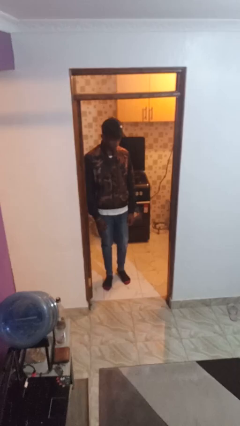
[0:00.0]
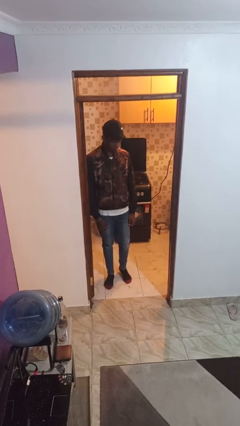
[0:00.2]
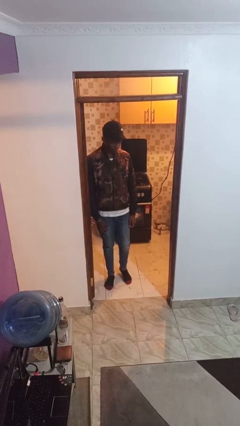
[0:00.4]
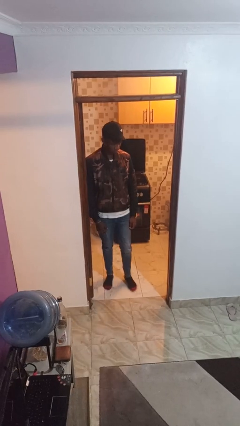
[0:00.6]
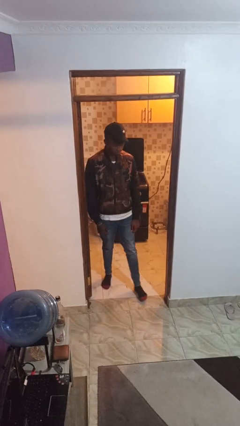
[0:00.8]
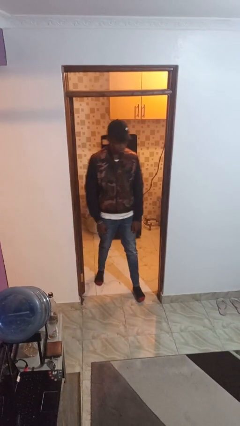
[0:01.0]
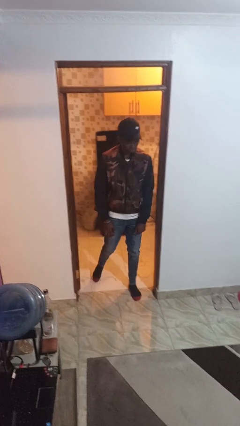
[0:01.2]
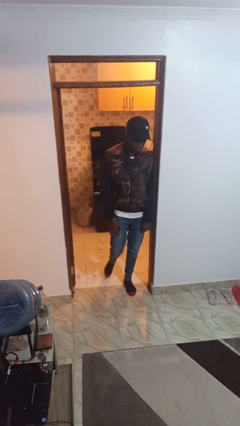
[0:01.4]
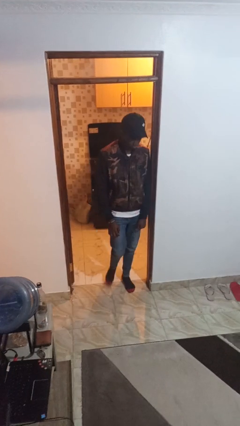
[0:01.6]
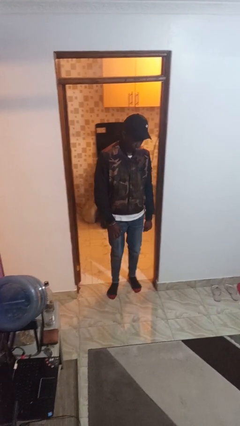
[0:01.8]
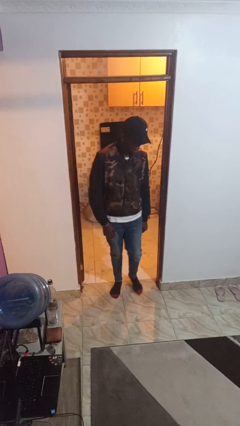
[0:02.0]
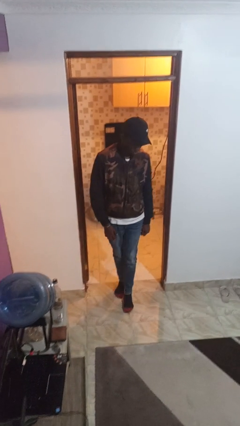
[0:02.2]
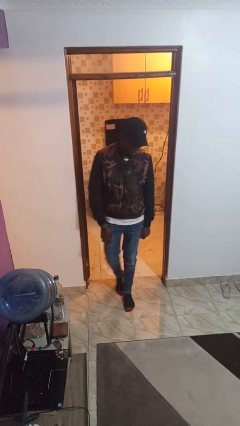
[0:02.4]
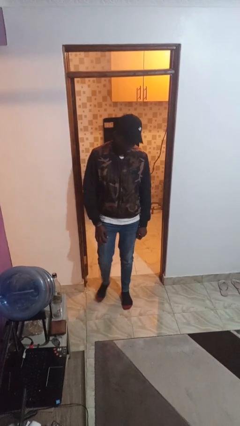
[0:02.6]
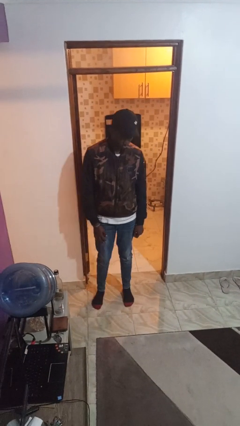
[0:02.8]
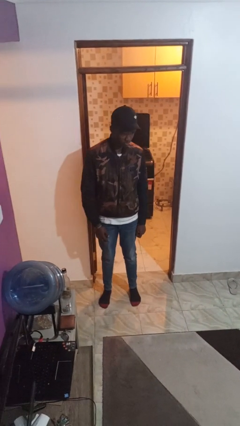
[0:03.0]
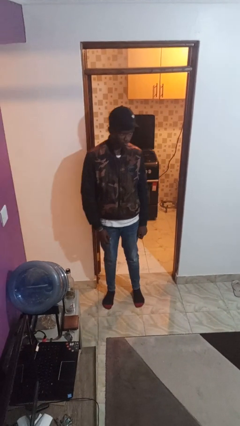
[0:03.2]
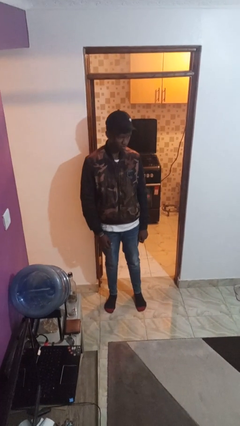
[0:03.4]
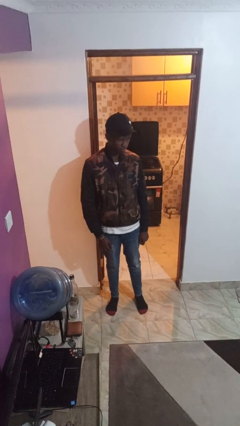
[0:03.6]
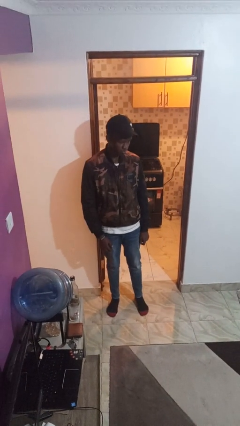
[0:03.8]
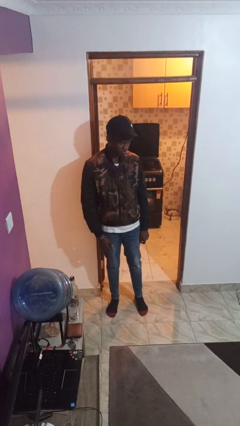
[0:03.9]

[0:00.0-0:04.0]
person bumps into wall

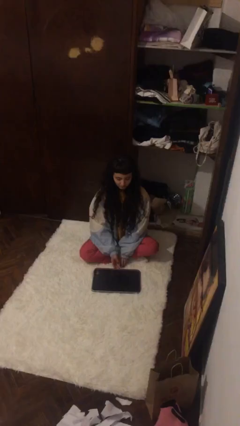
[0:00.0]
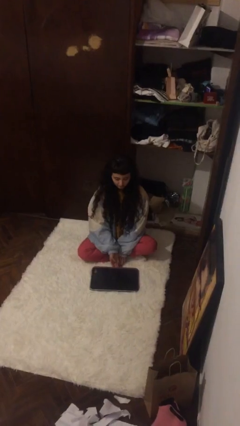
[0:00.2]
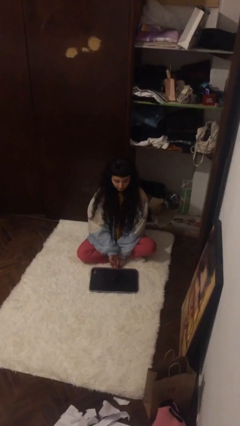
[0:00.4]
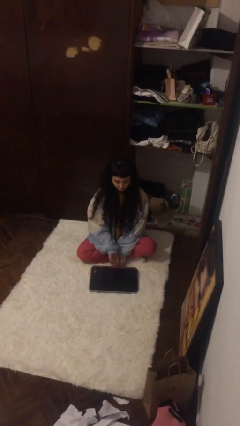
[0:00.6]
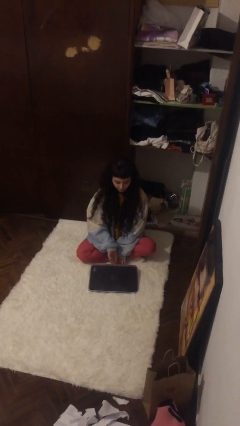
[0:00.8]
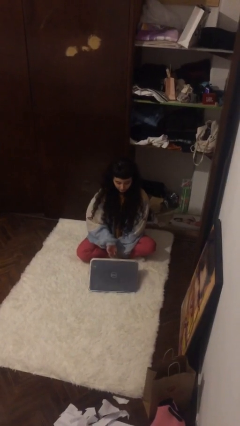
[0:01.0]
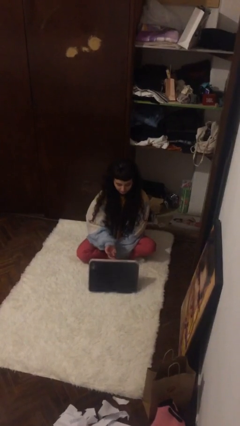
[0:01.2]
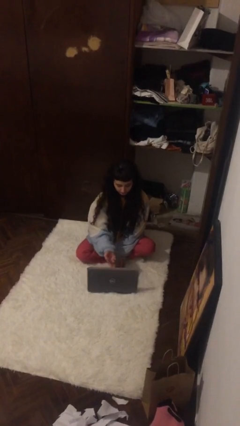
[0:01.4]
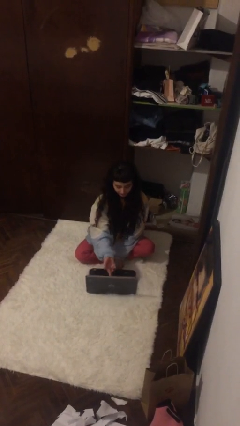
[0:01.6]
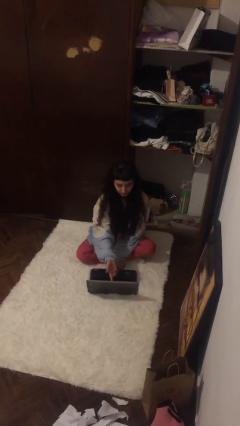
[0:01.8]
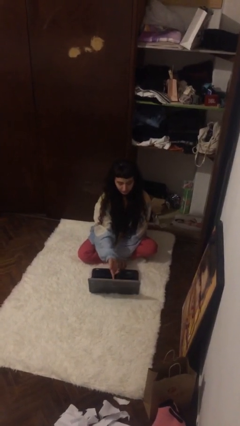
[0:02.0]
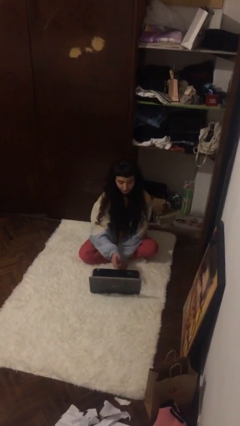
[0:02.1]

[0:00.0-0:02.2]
person opens laptop

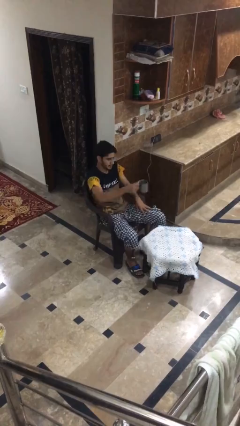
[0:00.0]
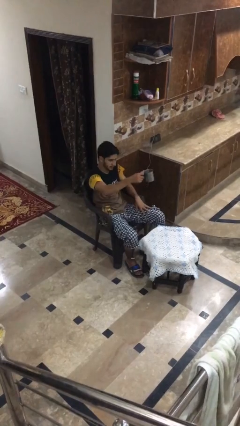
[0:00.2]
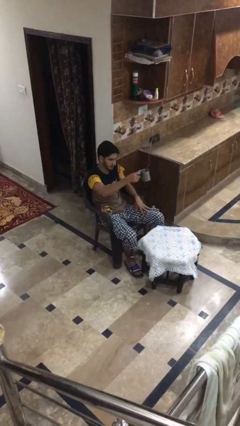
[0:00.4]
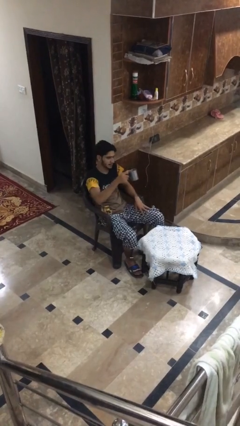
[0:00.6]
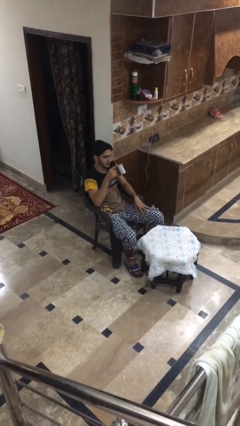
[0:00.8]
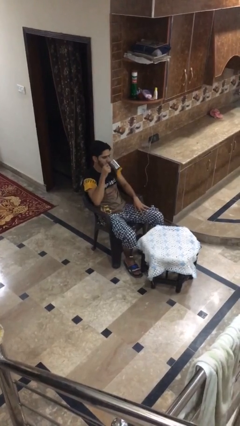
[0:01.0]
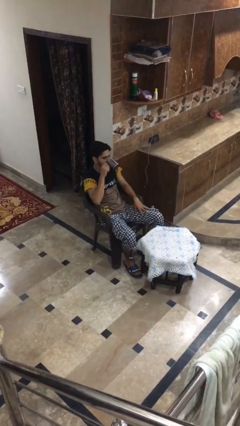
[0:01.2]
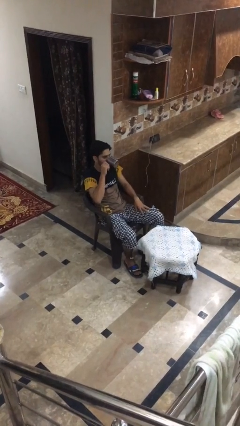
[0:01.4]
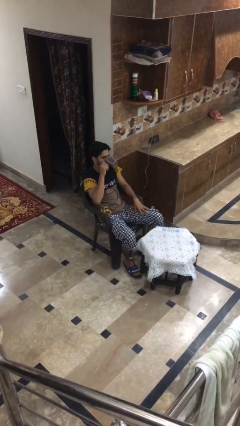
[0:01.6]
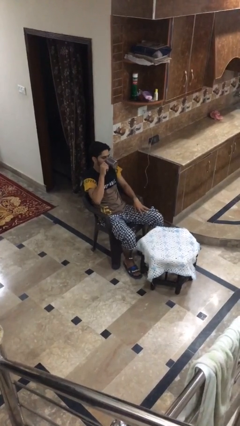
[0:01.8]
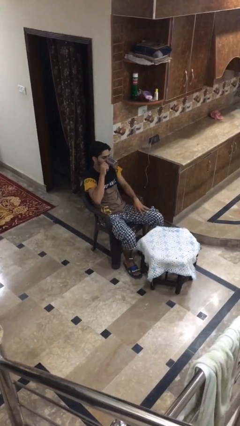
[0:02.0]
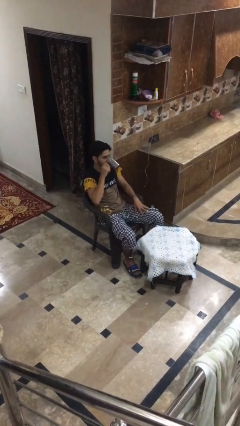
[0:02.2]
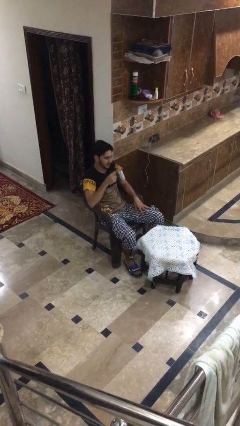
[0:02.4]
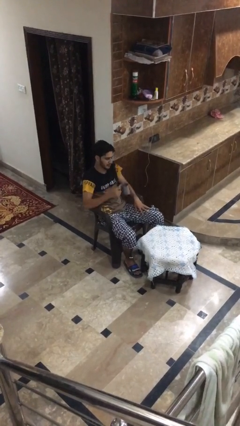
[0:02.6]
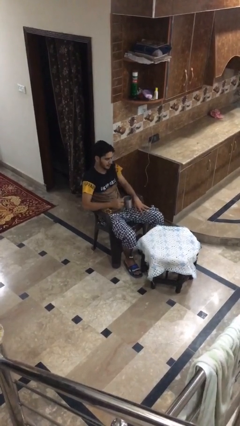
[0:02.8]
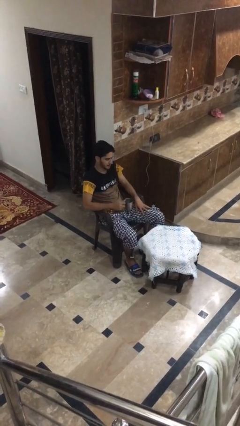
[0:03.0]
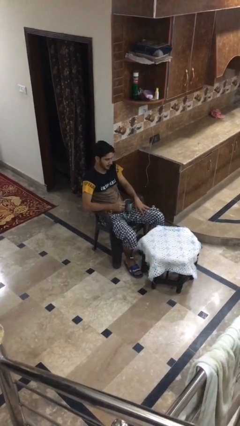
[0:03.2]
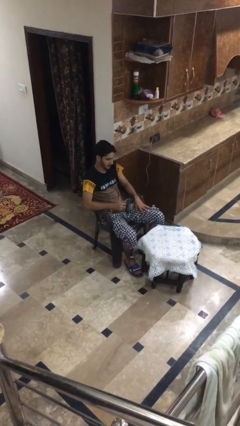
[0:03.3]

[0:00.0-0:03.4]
person drinks from shotglass

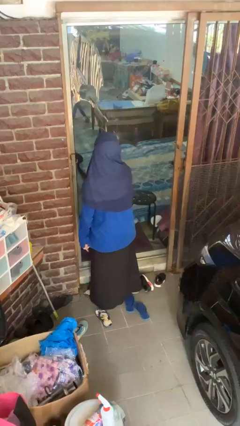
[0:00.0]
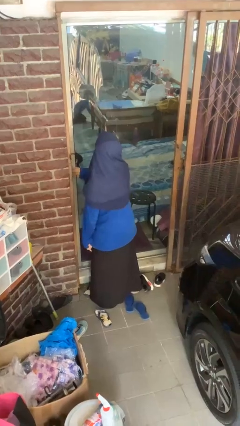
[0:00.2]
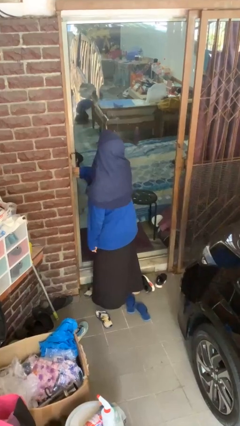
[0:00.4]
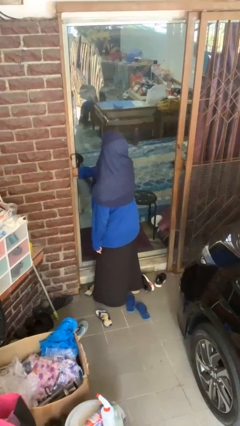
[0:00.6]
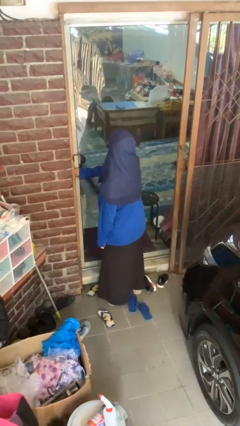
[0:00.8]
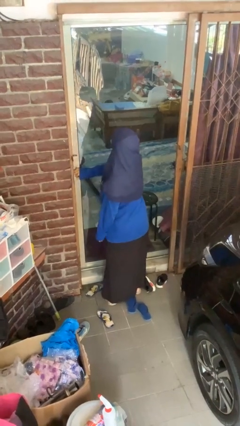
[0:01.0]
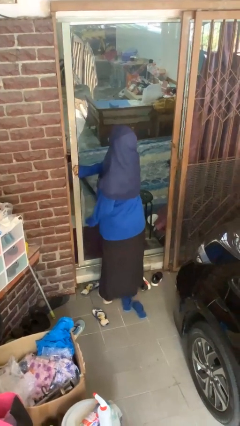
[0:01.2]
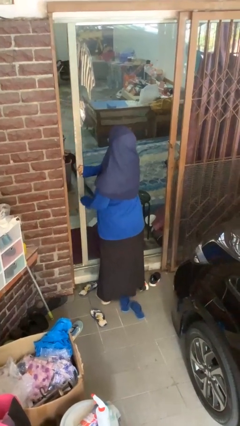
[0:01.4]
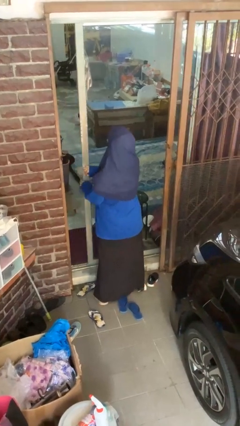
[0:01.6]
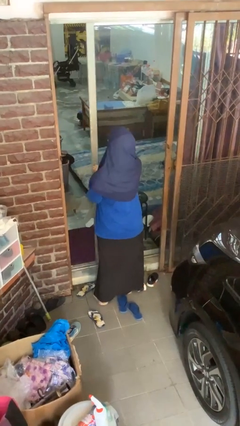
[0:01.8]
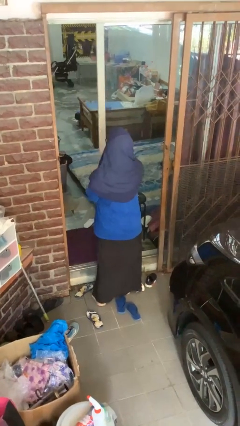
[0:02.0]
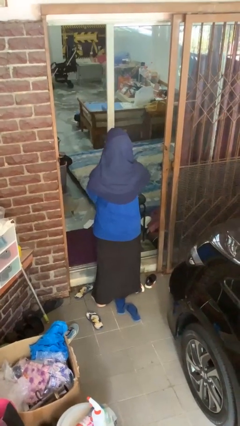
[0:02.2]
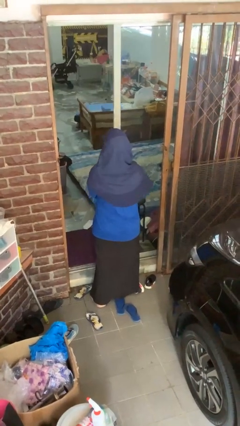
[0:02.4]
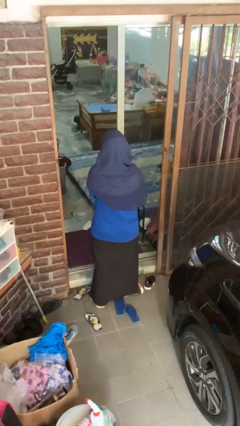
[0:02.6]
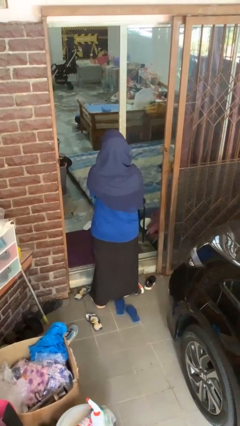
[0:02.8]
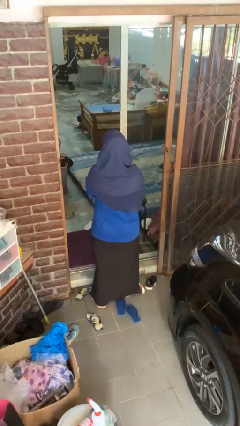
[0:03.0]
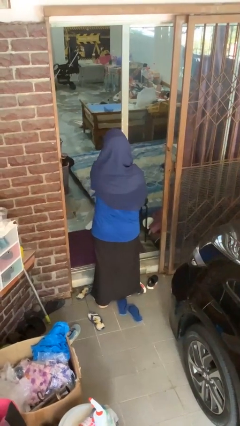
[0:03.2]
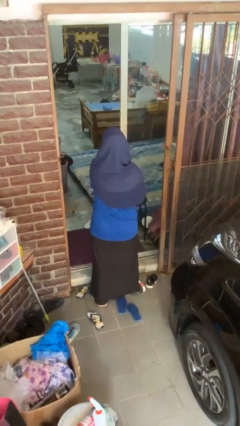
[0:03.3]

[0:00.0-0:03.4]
person opens sliding door

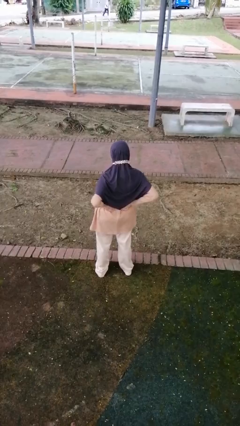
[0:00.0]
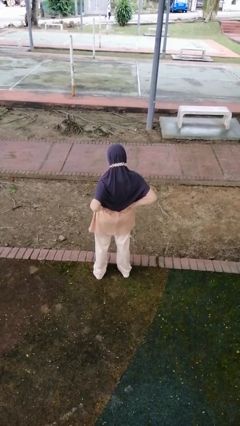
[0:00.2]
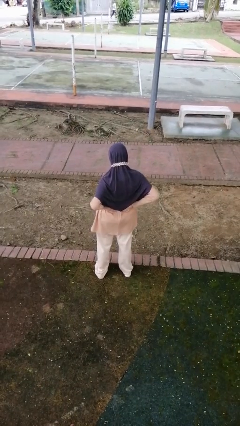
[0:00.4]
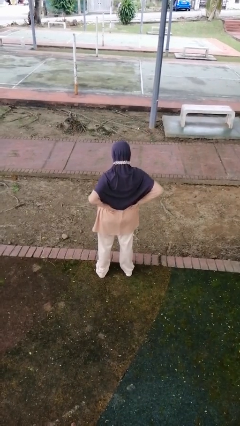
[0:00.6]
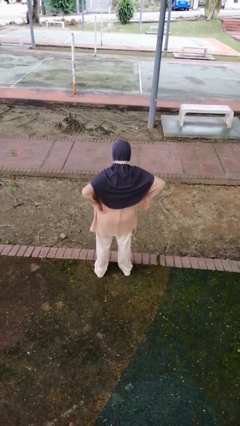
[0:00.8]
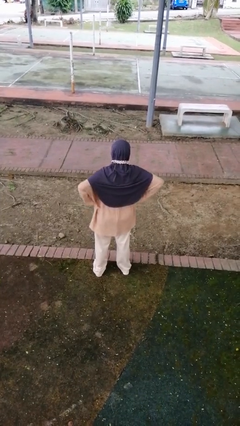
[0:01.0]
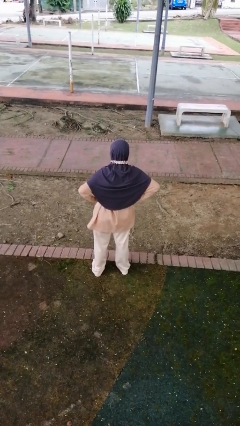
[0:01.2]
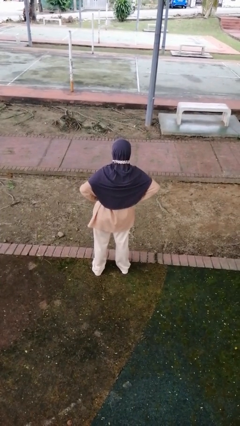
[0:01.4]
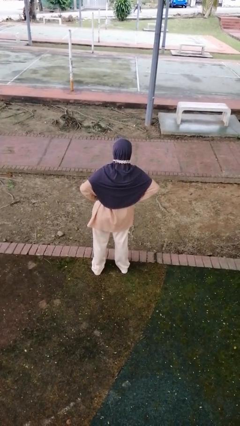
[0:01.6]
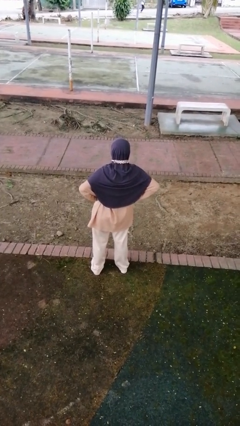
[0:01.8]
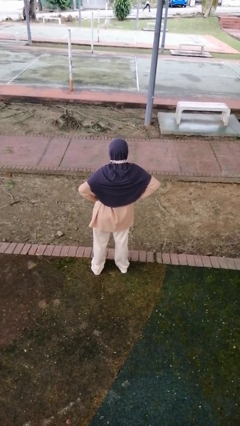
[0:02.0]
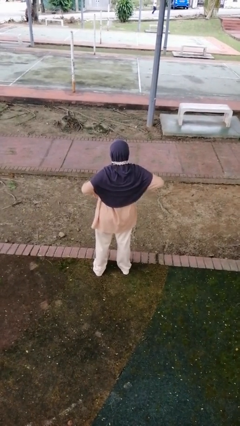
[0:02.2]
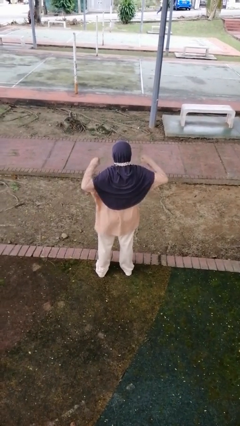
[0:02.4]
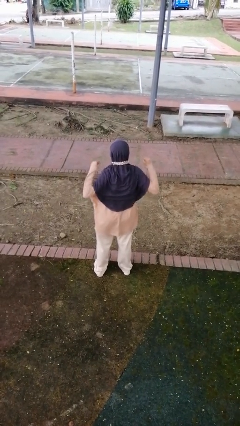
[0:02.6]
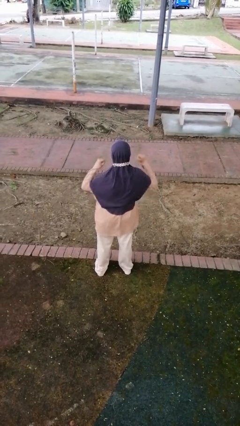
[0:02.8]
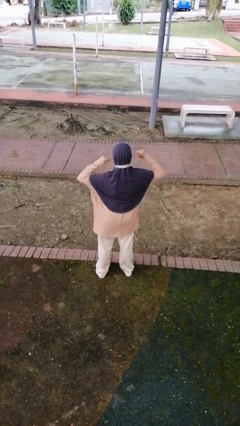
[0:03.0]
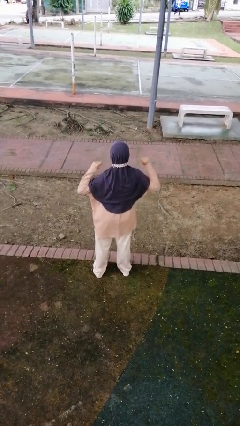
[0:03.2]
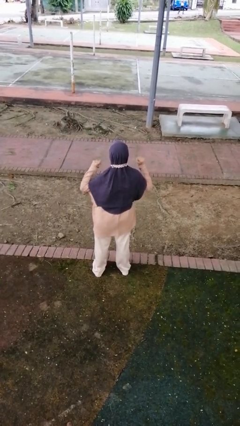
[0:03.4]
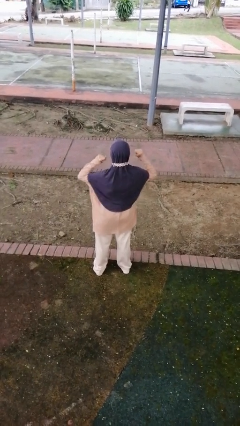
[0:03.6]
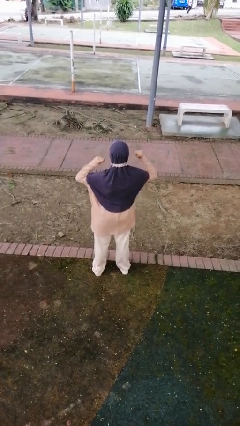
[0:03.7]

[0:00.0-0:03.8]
person stretches arms to side

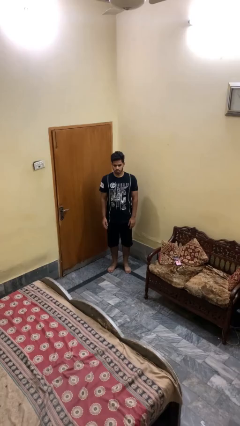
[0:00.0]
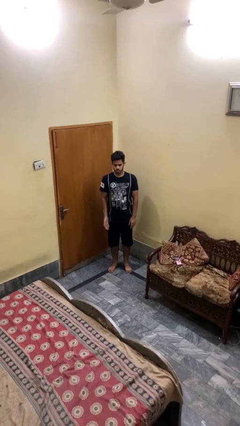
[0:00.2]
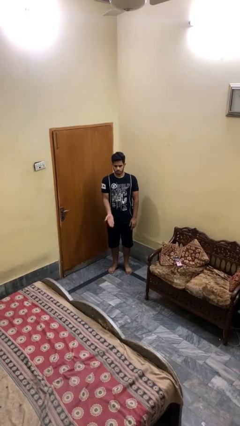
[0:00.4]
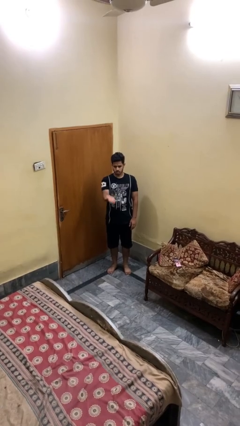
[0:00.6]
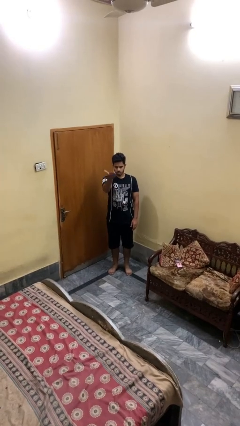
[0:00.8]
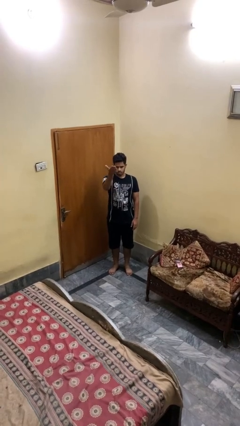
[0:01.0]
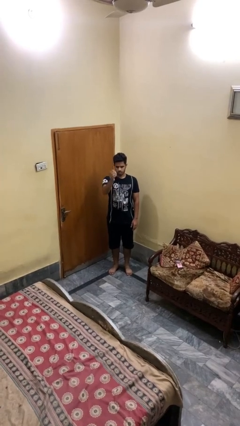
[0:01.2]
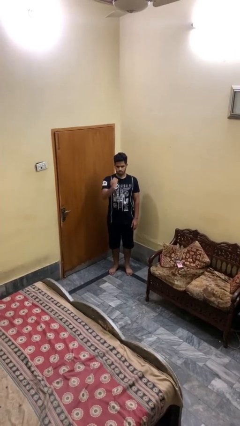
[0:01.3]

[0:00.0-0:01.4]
person gestures swipe up
